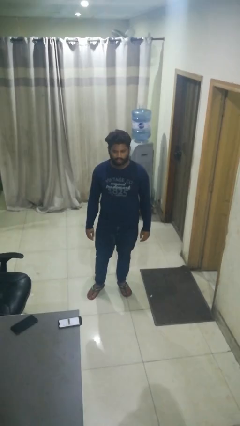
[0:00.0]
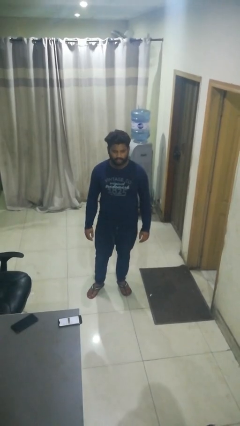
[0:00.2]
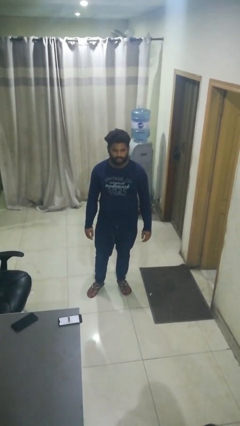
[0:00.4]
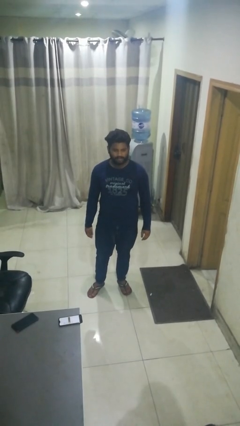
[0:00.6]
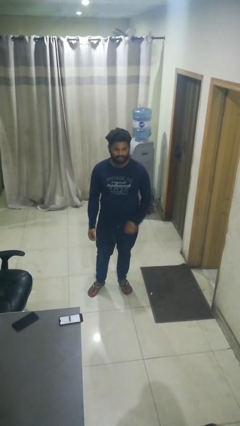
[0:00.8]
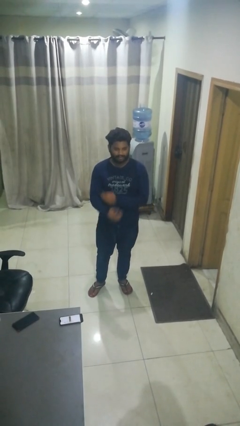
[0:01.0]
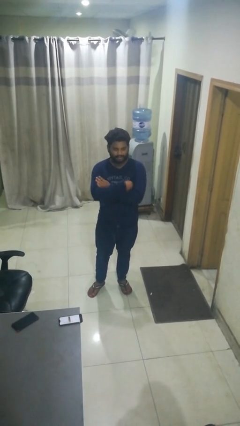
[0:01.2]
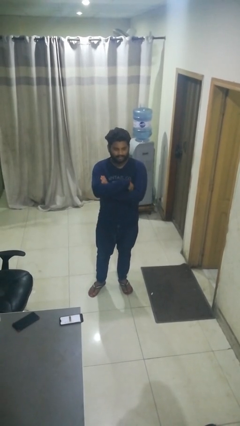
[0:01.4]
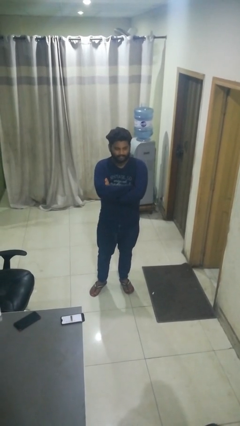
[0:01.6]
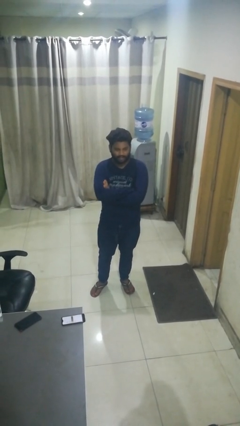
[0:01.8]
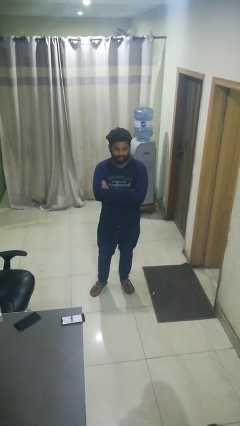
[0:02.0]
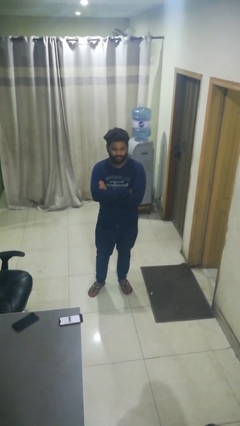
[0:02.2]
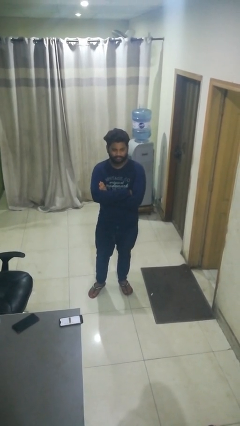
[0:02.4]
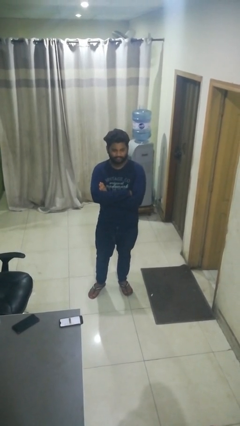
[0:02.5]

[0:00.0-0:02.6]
person crosses arms

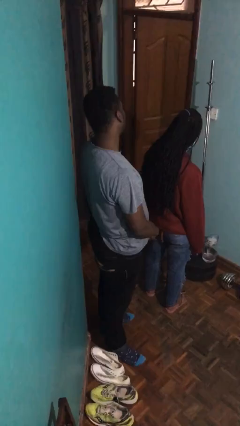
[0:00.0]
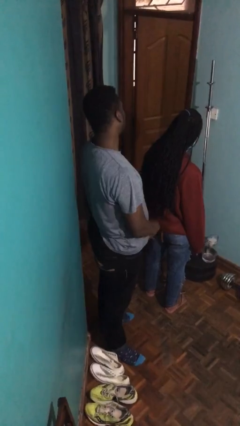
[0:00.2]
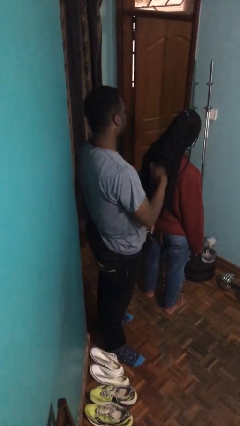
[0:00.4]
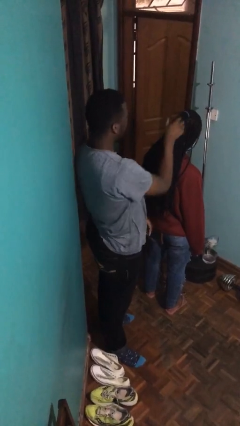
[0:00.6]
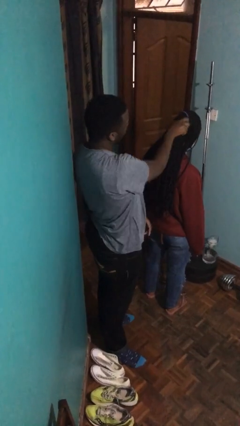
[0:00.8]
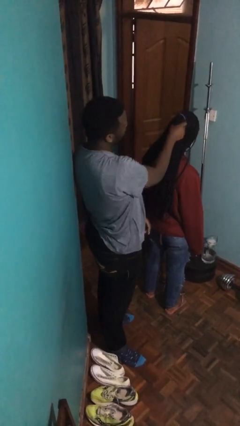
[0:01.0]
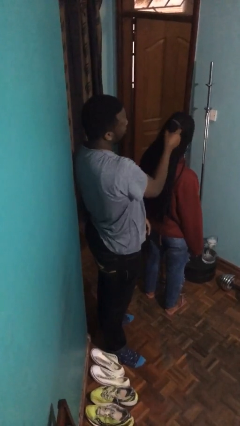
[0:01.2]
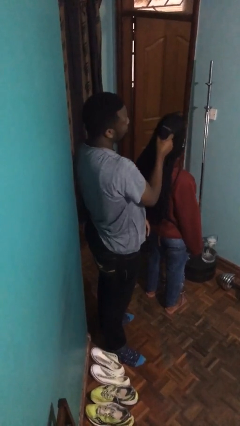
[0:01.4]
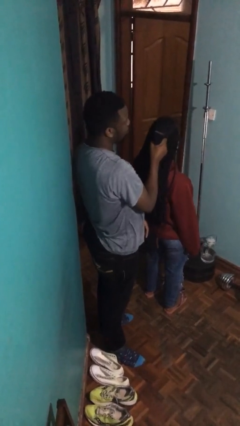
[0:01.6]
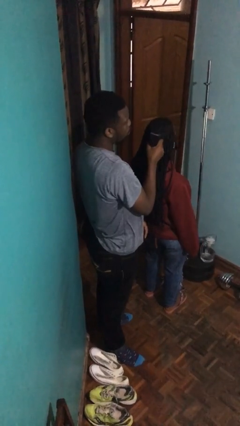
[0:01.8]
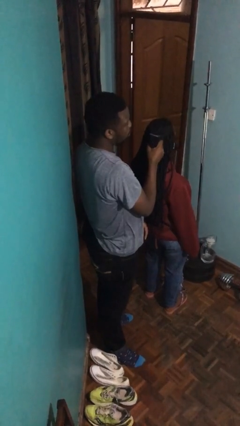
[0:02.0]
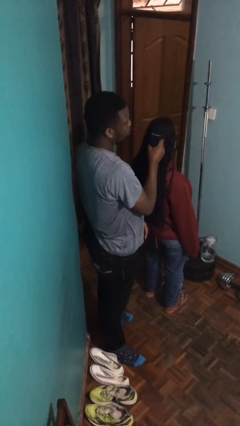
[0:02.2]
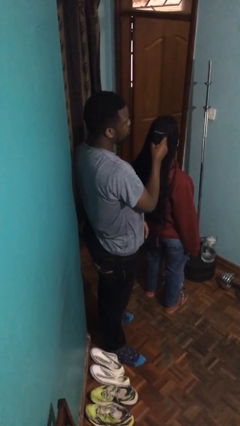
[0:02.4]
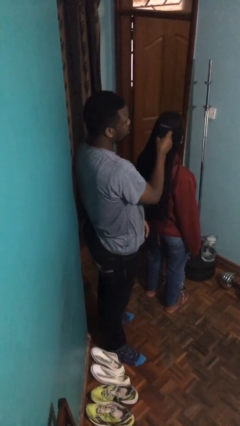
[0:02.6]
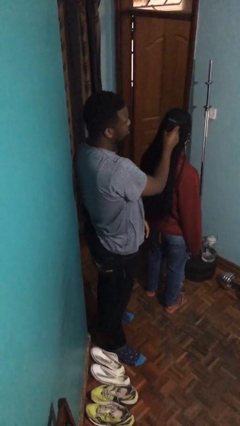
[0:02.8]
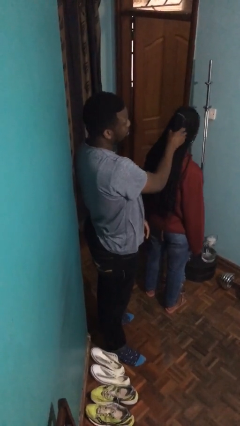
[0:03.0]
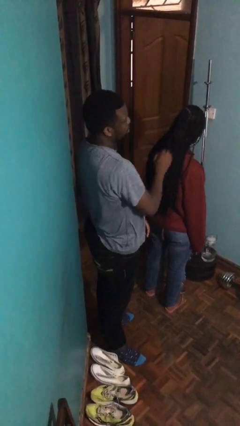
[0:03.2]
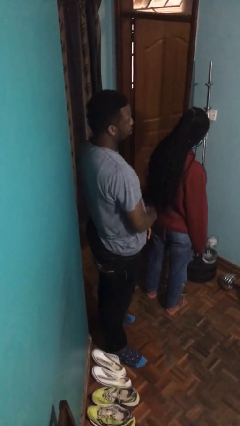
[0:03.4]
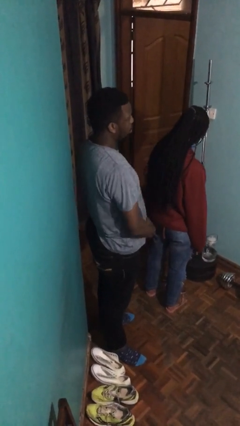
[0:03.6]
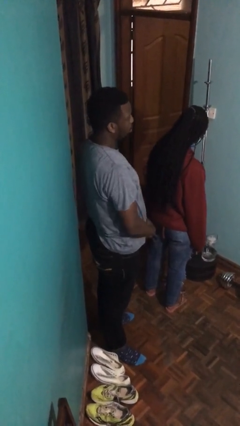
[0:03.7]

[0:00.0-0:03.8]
person grabs person by hair

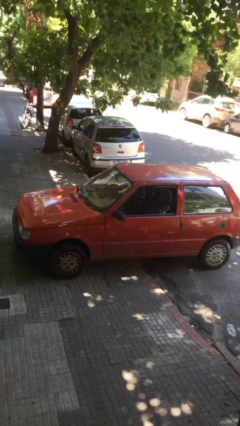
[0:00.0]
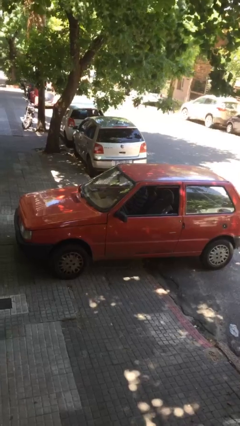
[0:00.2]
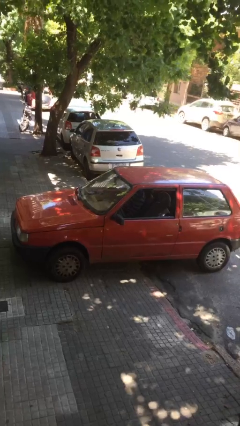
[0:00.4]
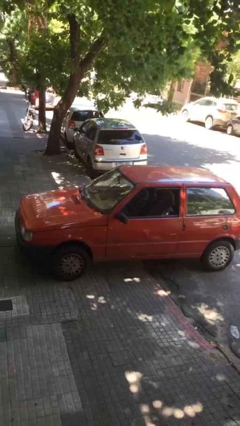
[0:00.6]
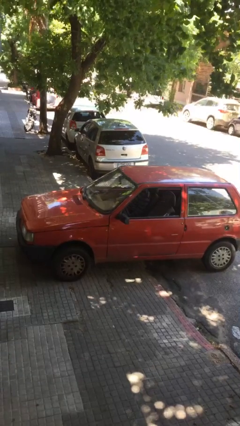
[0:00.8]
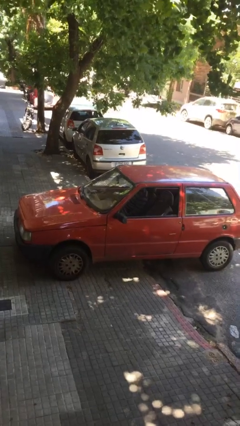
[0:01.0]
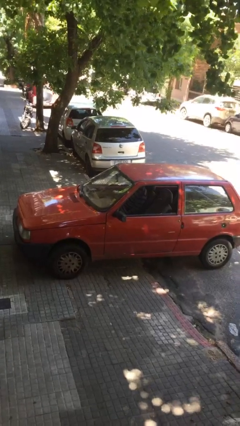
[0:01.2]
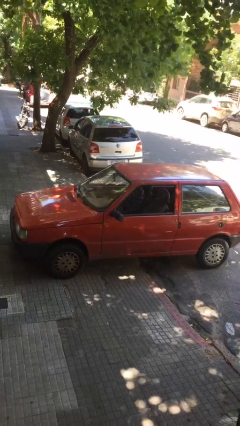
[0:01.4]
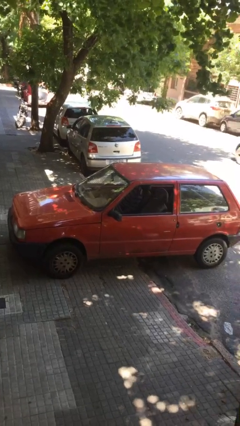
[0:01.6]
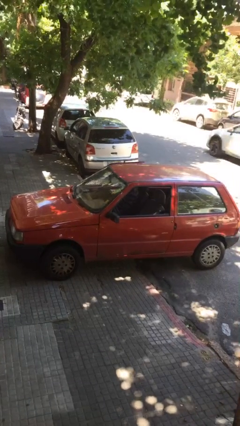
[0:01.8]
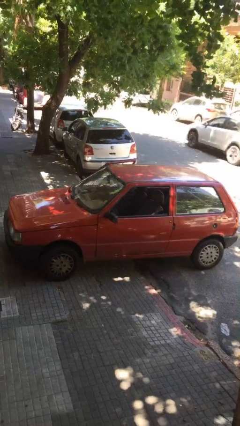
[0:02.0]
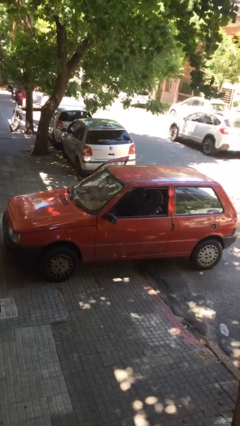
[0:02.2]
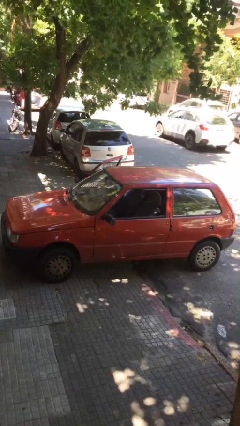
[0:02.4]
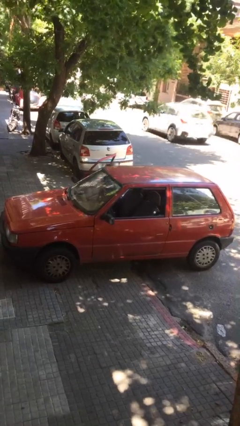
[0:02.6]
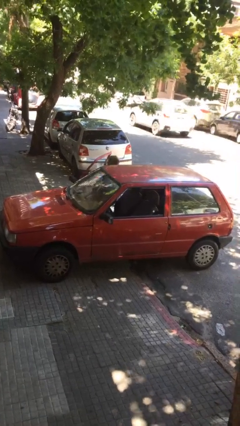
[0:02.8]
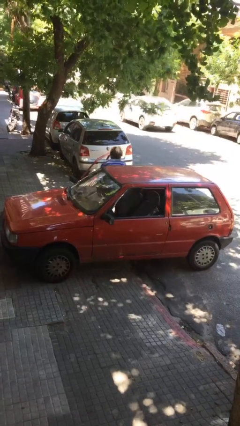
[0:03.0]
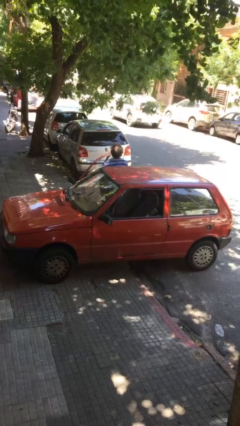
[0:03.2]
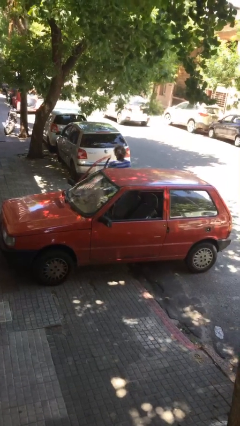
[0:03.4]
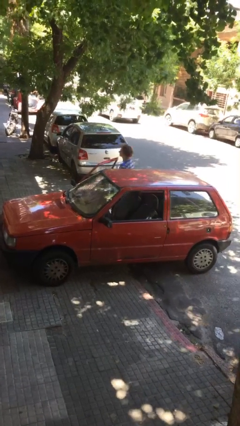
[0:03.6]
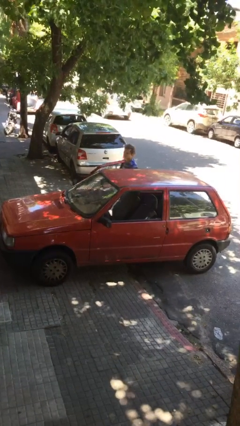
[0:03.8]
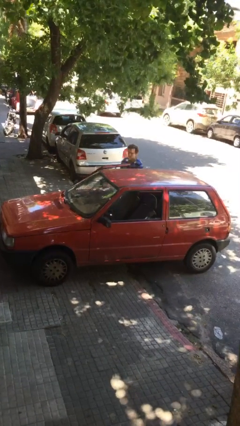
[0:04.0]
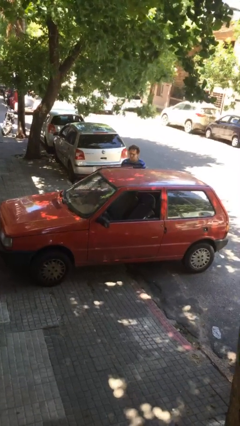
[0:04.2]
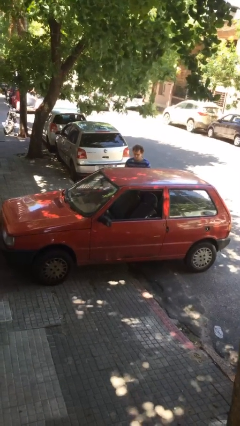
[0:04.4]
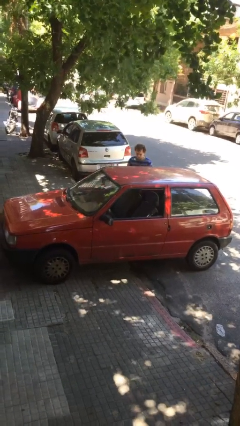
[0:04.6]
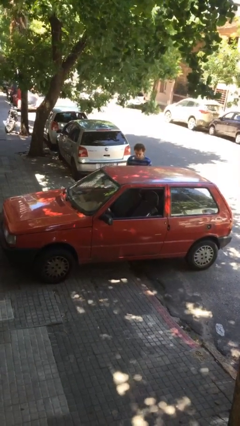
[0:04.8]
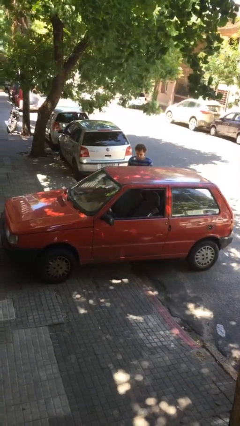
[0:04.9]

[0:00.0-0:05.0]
car drops off person

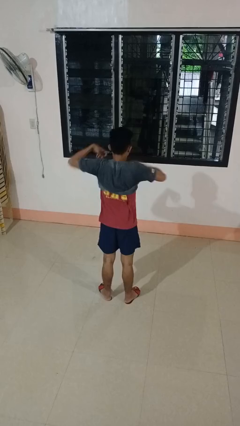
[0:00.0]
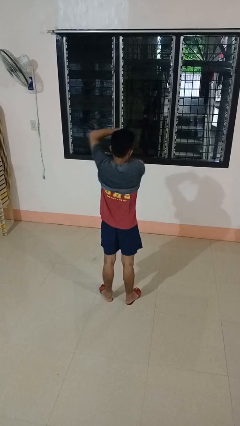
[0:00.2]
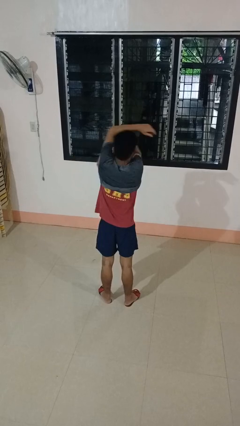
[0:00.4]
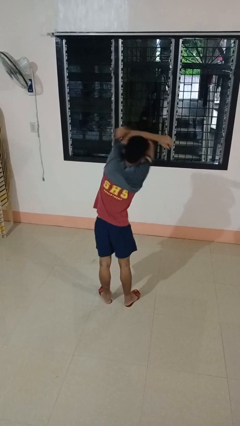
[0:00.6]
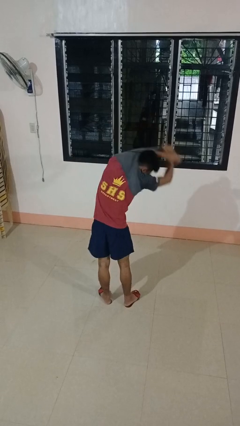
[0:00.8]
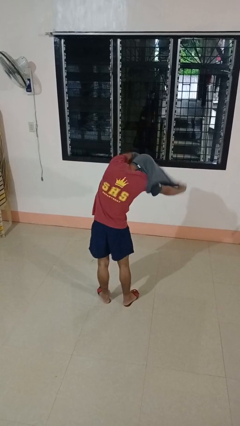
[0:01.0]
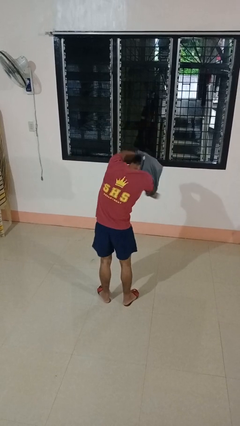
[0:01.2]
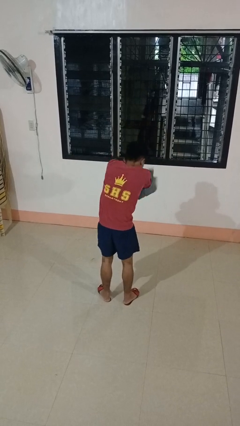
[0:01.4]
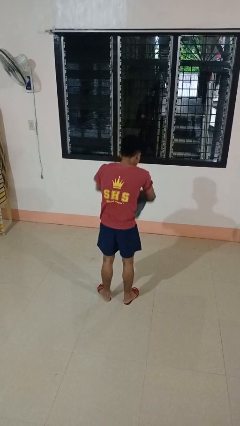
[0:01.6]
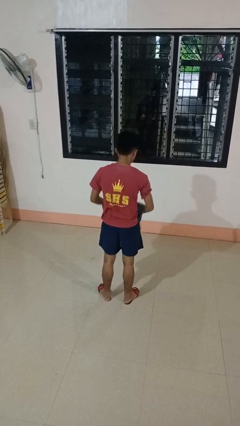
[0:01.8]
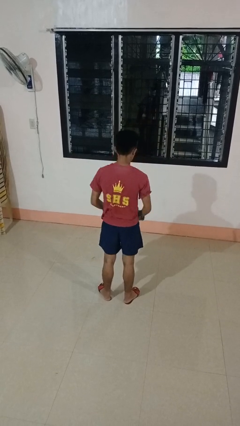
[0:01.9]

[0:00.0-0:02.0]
person takes off shirt

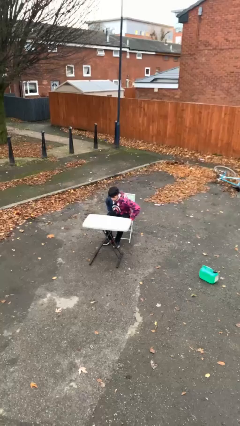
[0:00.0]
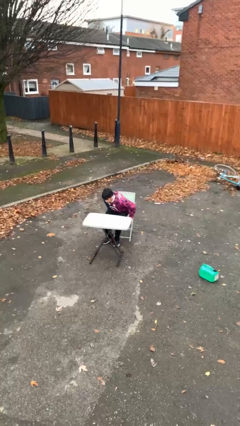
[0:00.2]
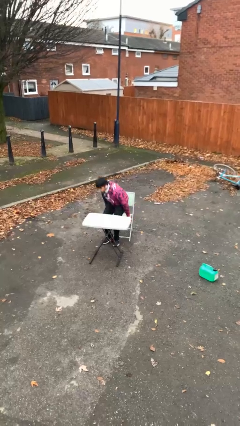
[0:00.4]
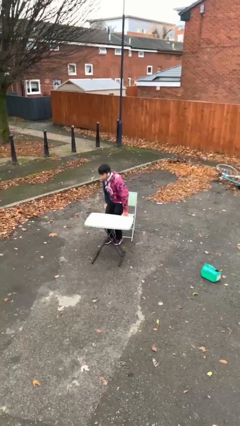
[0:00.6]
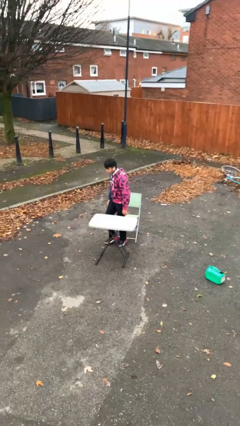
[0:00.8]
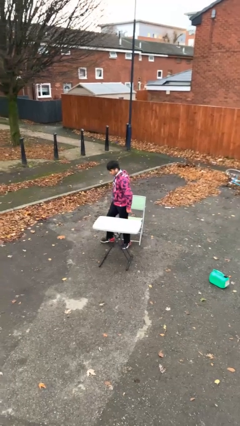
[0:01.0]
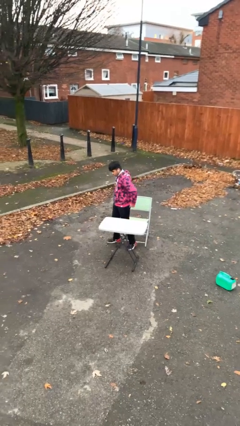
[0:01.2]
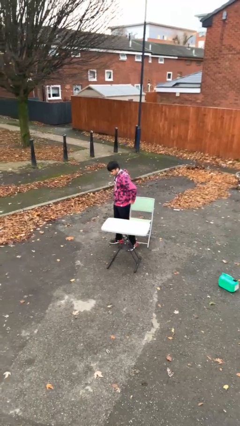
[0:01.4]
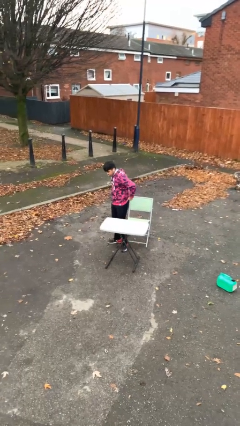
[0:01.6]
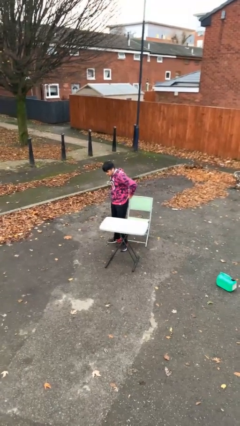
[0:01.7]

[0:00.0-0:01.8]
person stands up

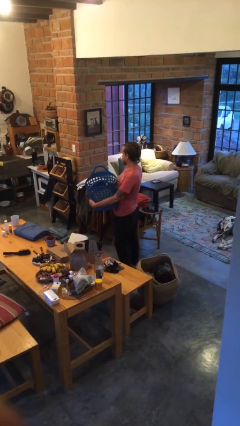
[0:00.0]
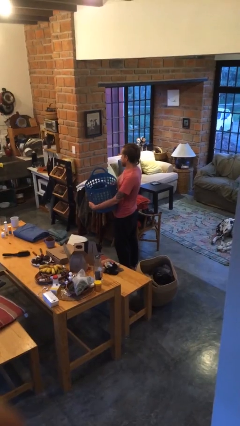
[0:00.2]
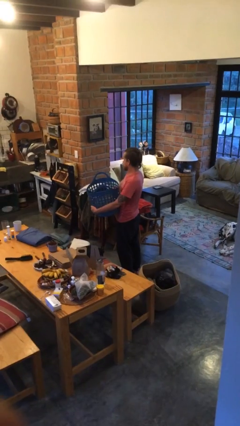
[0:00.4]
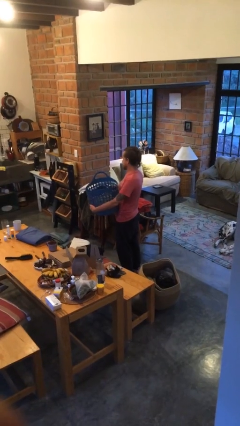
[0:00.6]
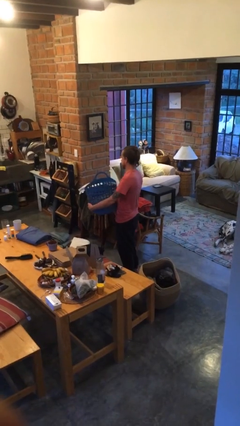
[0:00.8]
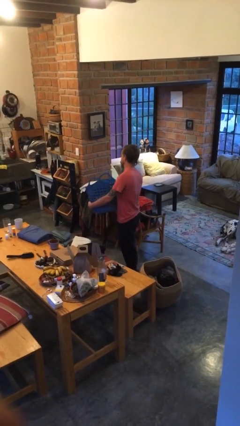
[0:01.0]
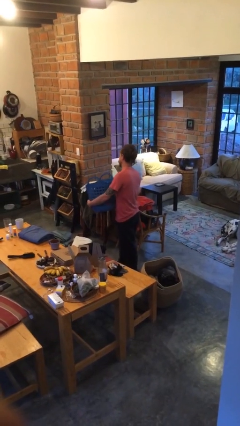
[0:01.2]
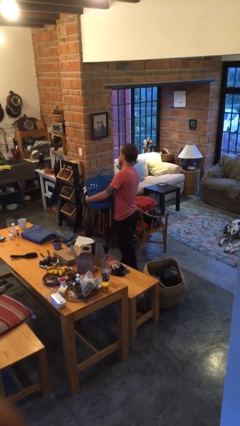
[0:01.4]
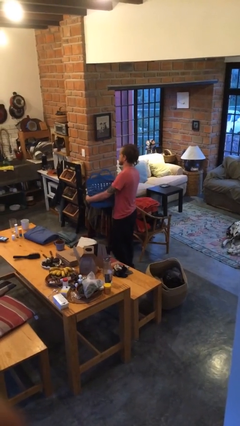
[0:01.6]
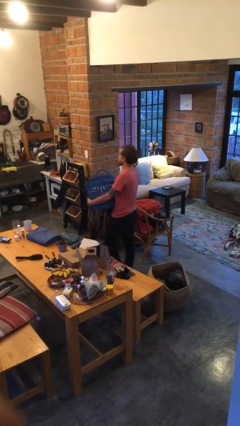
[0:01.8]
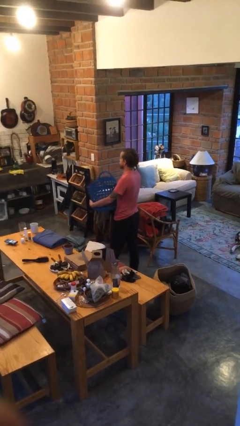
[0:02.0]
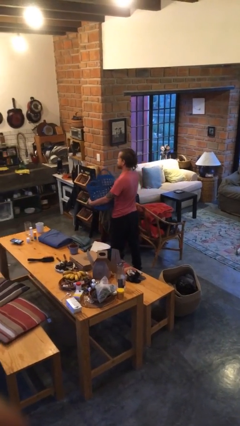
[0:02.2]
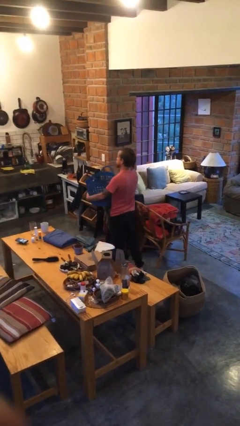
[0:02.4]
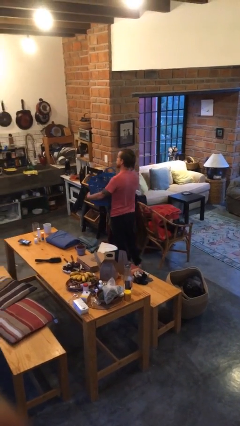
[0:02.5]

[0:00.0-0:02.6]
person carries laundry basket
